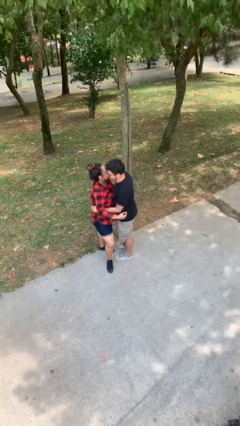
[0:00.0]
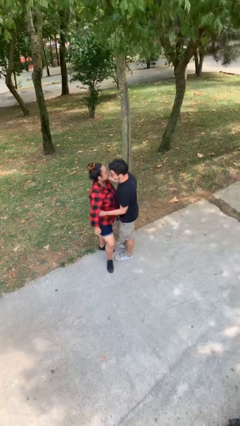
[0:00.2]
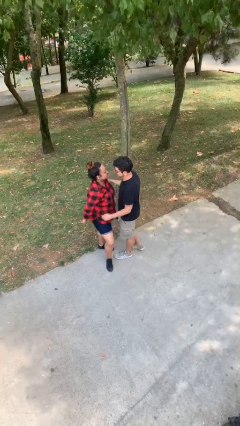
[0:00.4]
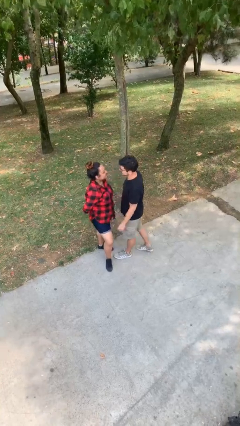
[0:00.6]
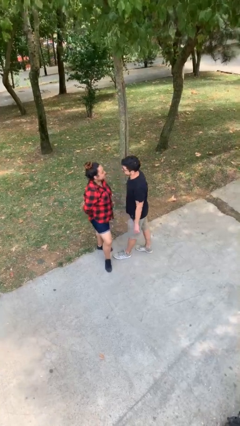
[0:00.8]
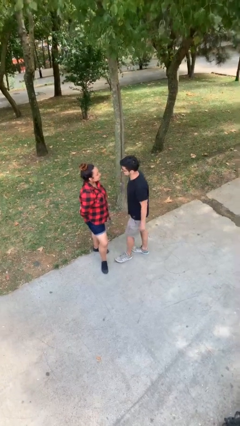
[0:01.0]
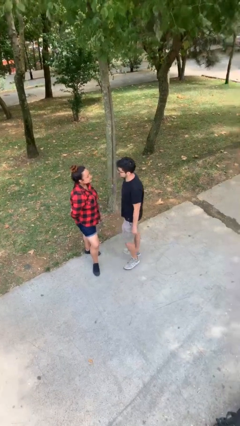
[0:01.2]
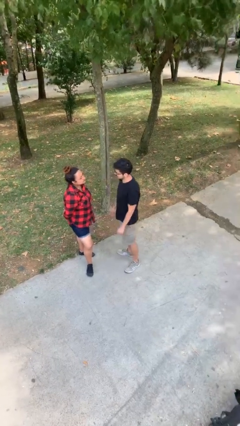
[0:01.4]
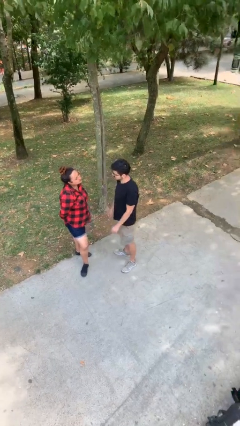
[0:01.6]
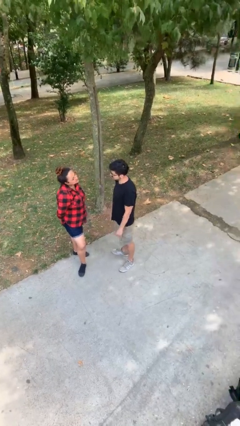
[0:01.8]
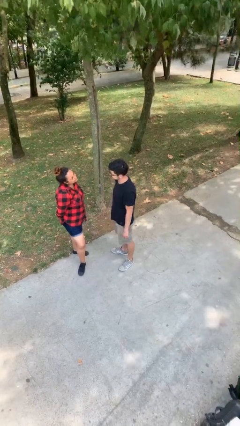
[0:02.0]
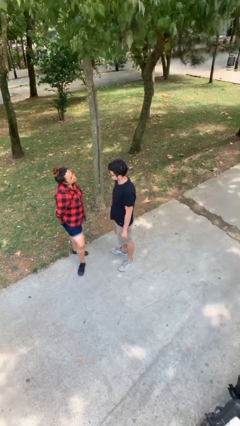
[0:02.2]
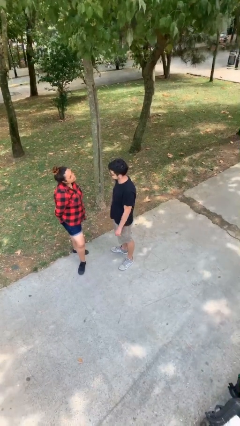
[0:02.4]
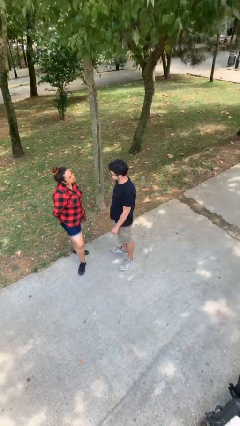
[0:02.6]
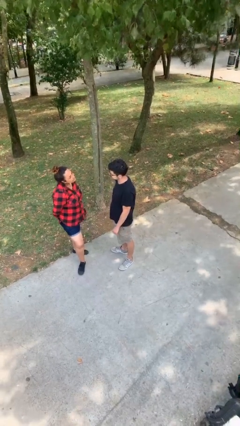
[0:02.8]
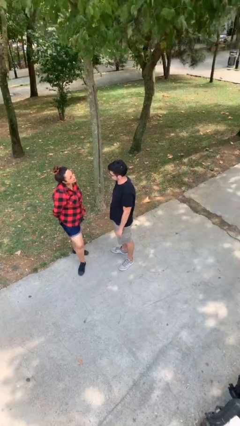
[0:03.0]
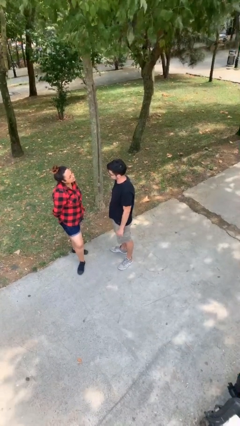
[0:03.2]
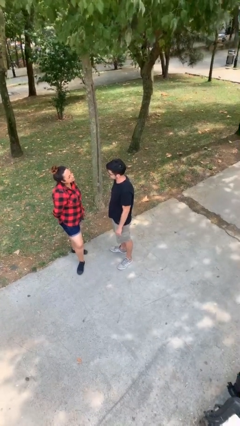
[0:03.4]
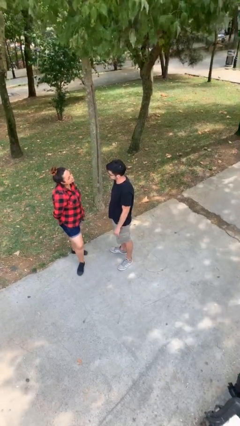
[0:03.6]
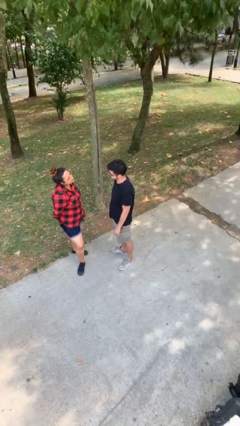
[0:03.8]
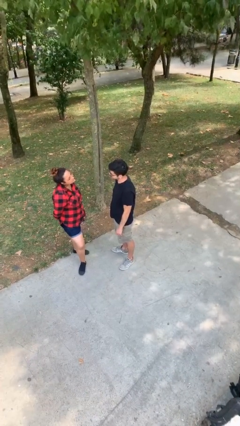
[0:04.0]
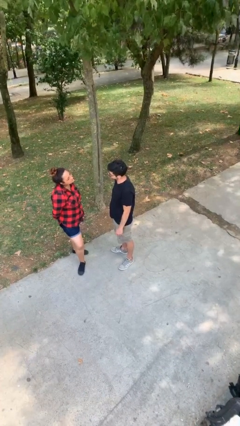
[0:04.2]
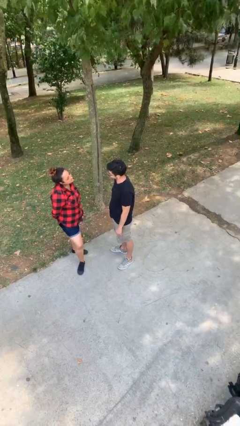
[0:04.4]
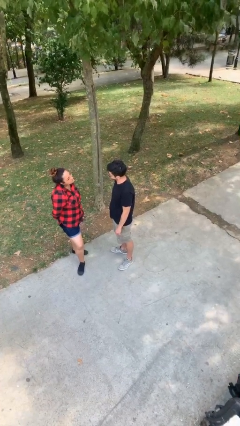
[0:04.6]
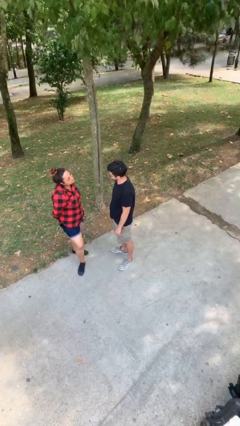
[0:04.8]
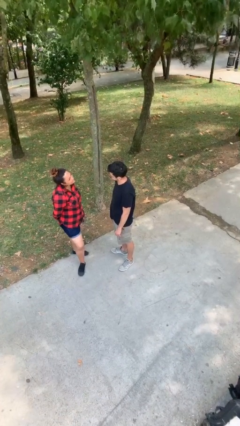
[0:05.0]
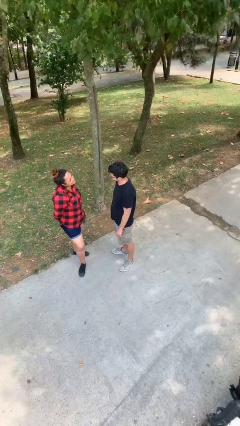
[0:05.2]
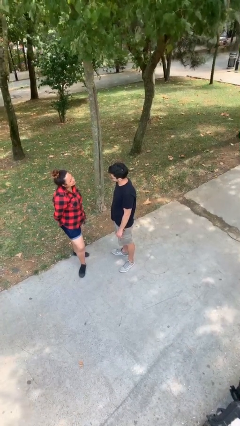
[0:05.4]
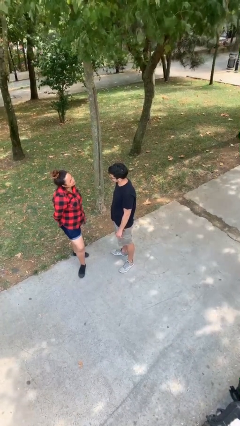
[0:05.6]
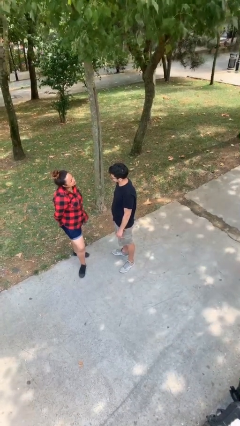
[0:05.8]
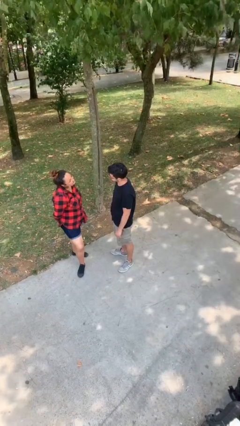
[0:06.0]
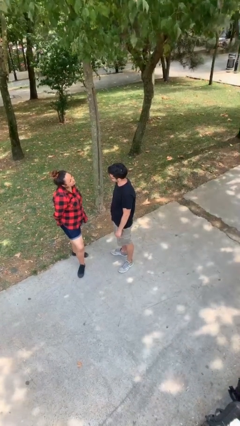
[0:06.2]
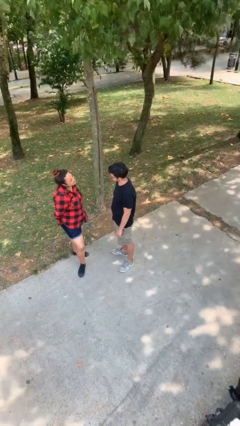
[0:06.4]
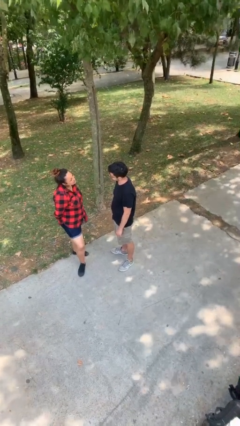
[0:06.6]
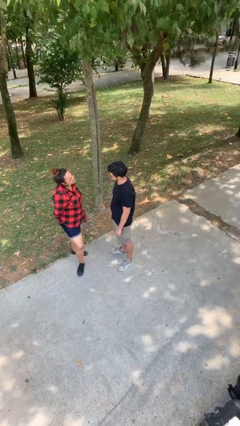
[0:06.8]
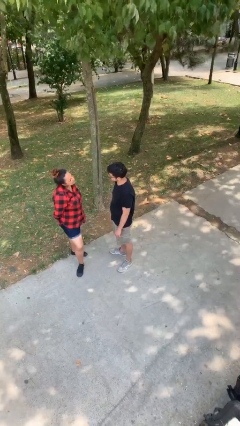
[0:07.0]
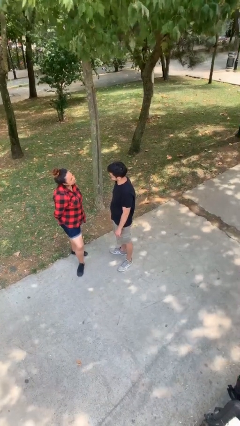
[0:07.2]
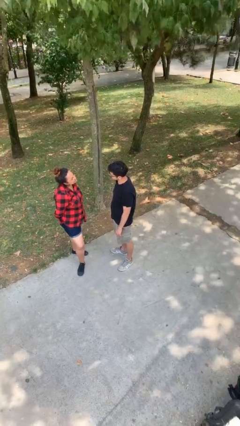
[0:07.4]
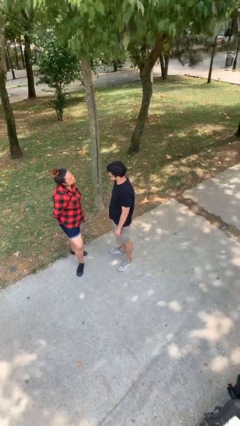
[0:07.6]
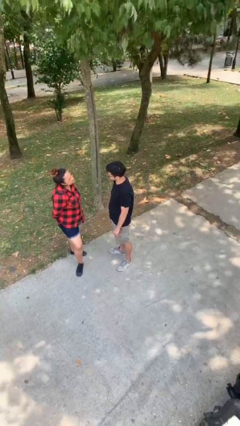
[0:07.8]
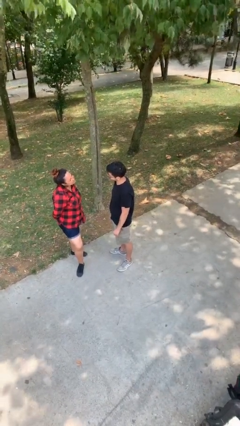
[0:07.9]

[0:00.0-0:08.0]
person talks to person

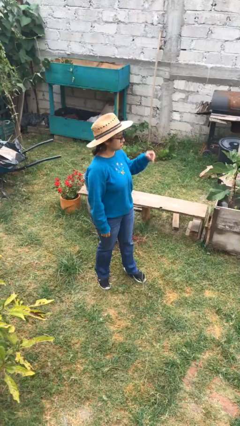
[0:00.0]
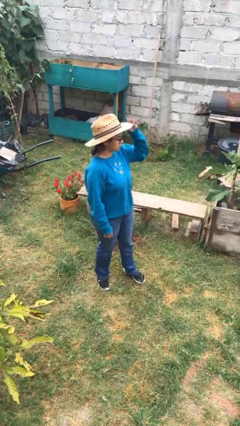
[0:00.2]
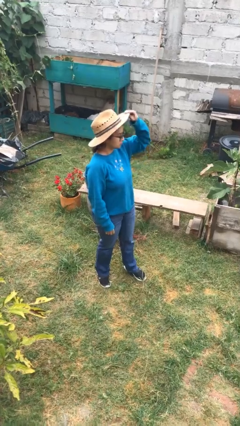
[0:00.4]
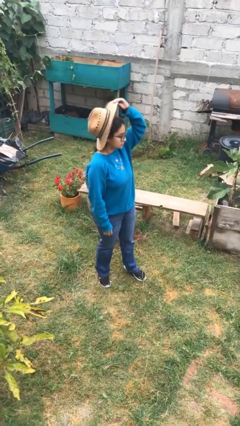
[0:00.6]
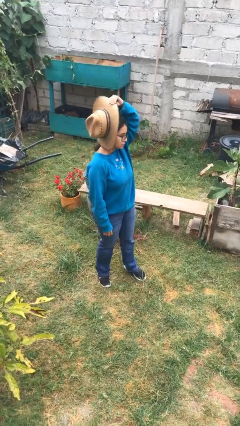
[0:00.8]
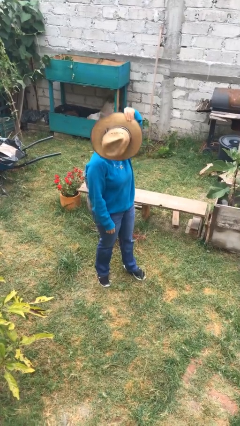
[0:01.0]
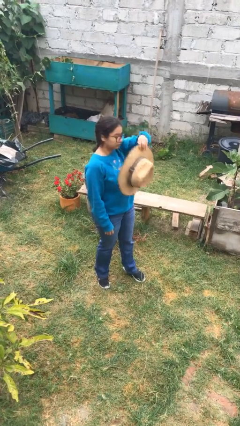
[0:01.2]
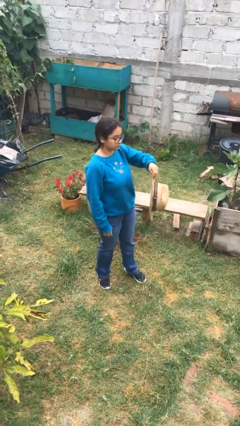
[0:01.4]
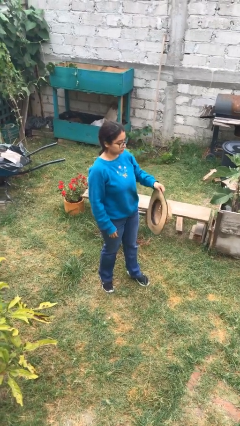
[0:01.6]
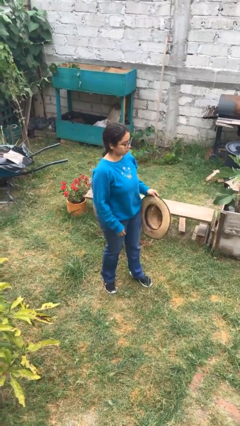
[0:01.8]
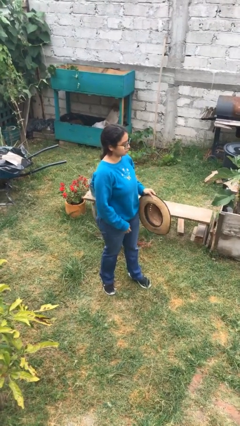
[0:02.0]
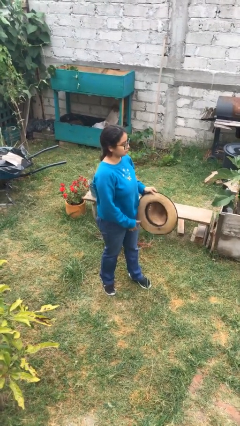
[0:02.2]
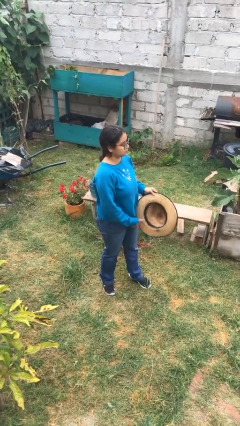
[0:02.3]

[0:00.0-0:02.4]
person takes off hat

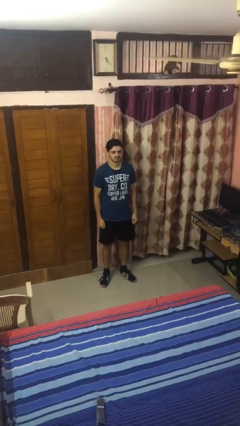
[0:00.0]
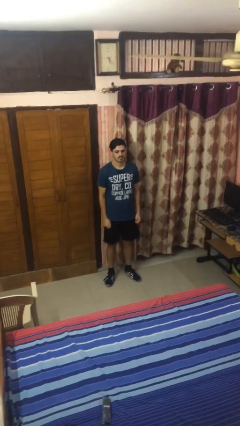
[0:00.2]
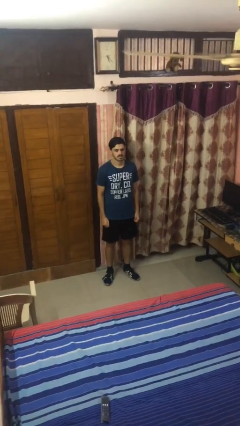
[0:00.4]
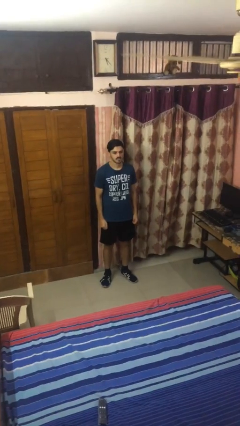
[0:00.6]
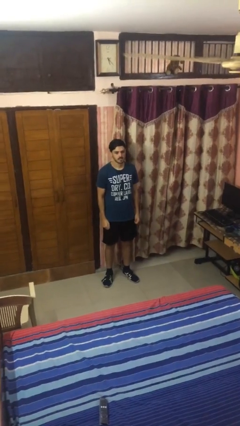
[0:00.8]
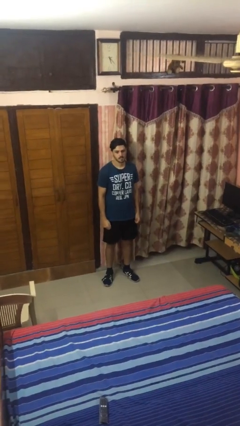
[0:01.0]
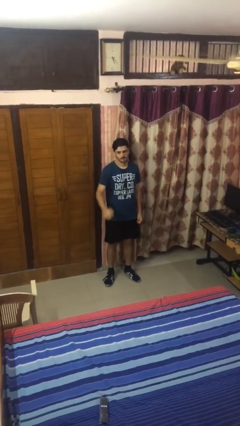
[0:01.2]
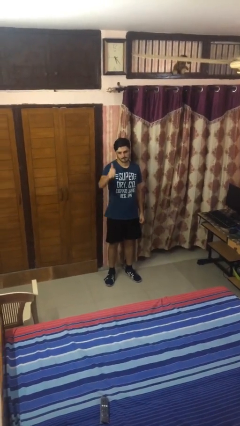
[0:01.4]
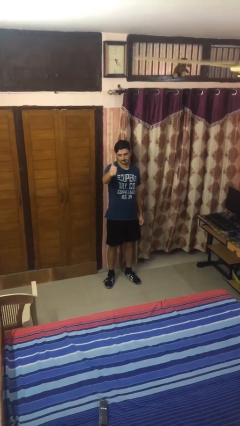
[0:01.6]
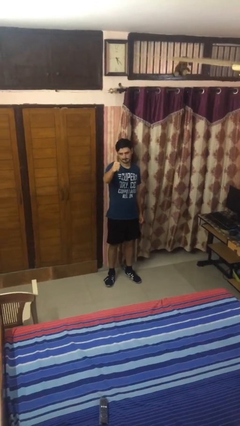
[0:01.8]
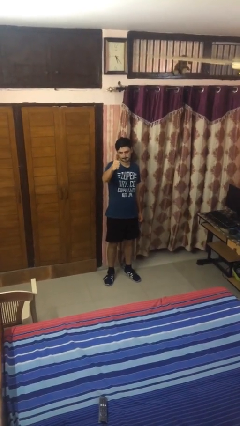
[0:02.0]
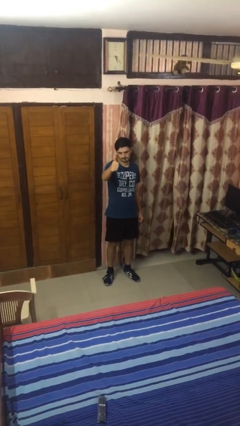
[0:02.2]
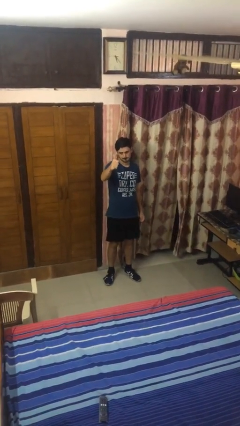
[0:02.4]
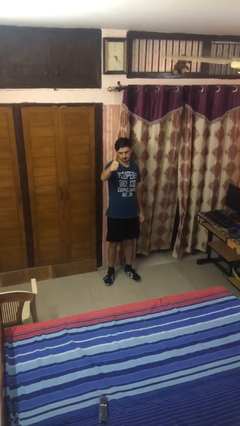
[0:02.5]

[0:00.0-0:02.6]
person gestures thumbs up

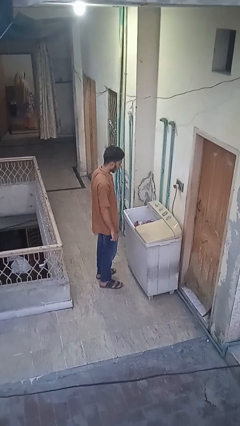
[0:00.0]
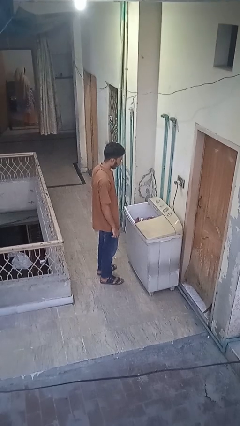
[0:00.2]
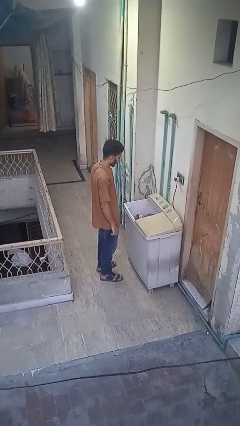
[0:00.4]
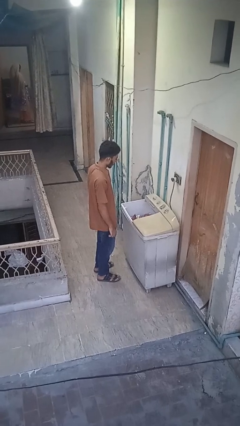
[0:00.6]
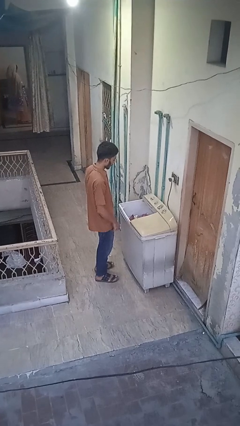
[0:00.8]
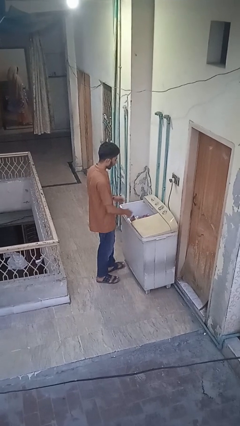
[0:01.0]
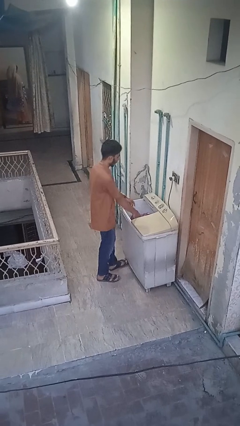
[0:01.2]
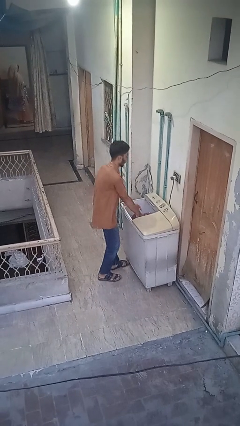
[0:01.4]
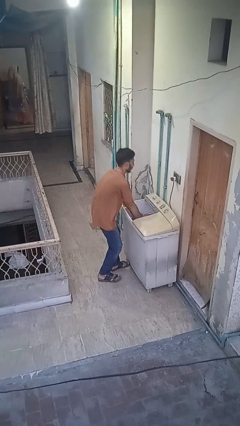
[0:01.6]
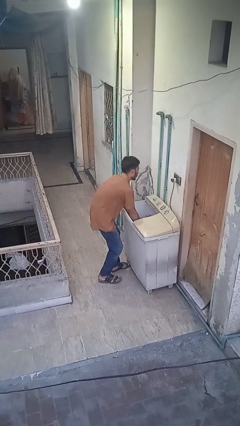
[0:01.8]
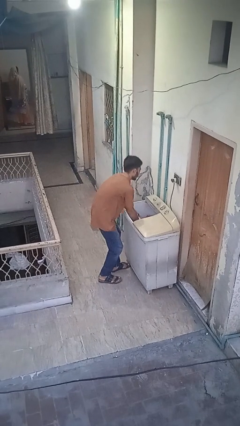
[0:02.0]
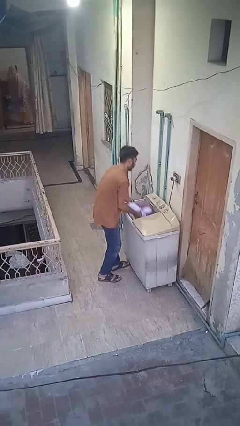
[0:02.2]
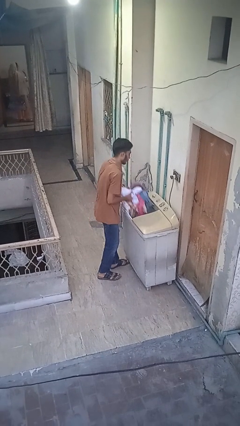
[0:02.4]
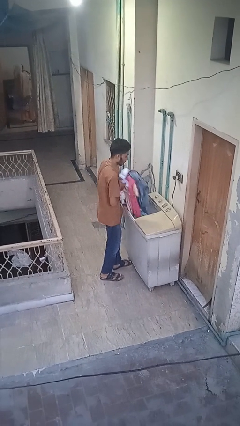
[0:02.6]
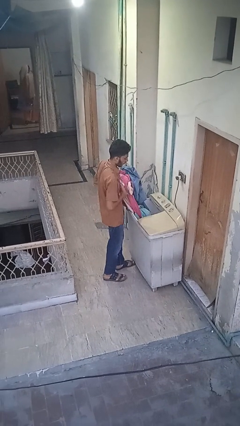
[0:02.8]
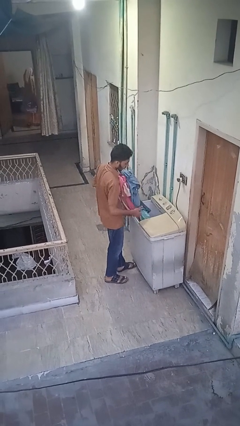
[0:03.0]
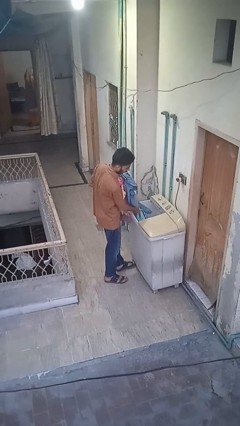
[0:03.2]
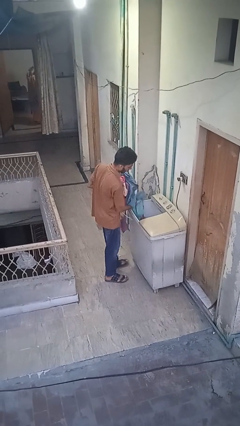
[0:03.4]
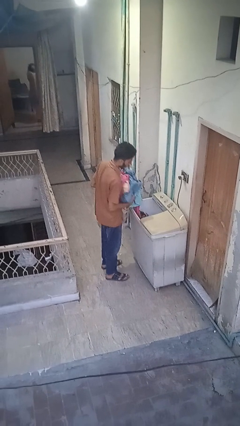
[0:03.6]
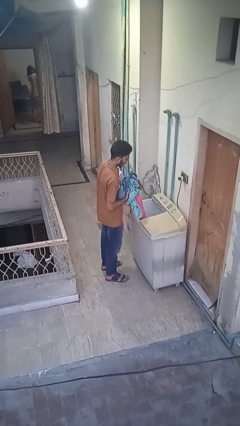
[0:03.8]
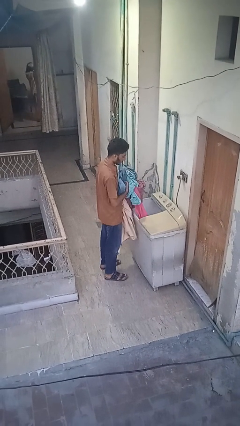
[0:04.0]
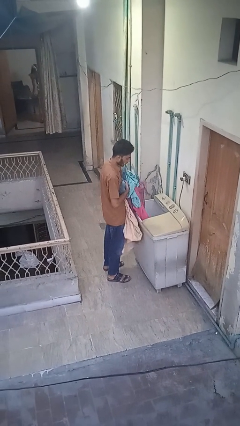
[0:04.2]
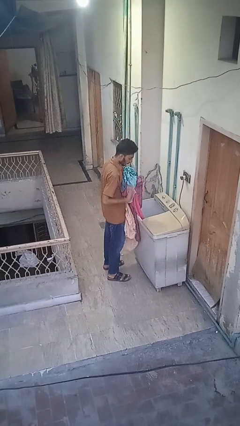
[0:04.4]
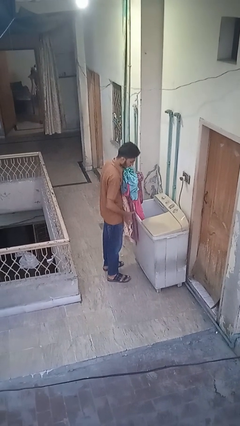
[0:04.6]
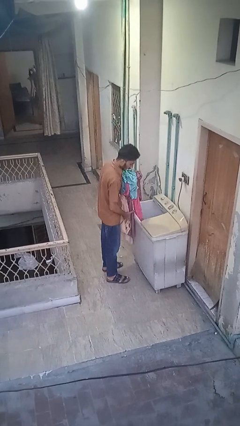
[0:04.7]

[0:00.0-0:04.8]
person unloads clotheswasher

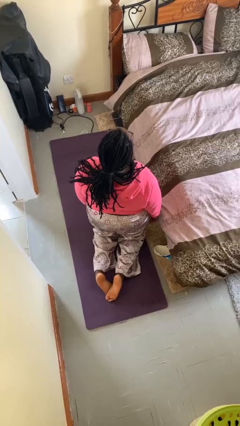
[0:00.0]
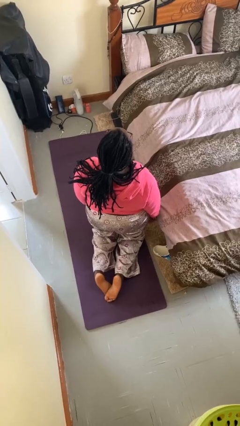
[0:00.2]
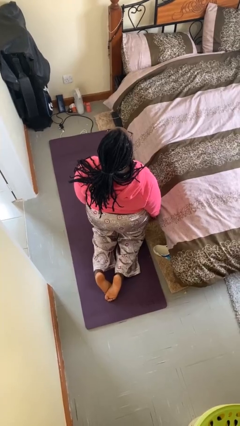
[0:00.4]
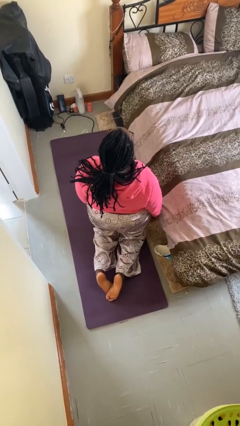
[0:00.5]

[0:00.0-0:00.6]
person searches under bed
